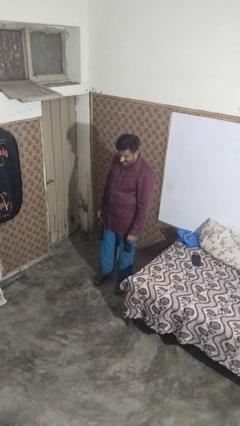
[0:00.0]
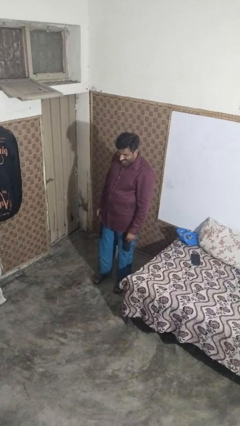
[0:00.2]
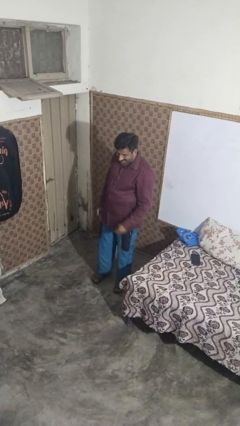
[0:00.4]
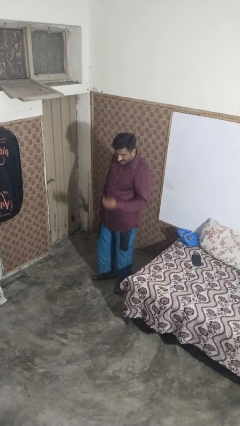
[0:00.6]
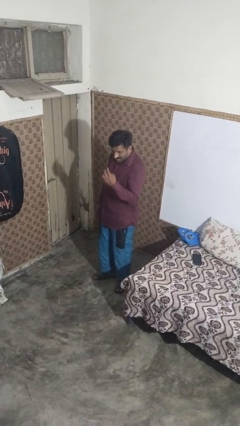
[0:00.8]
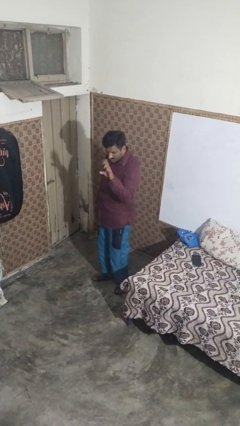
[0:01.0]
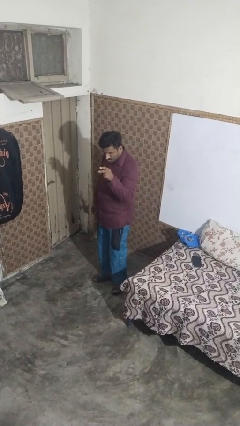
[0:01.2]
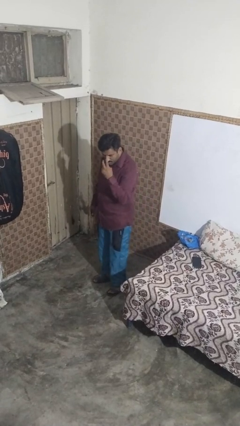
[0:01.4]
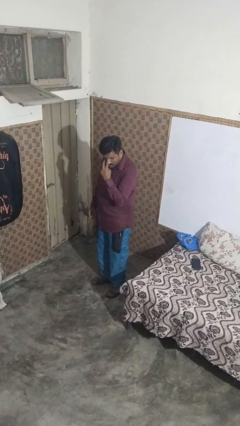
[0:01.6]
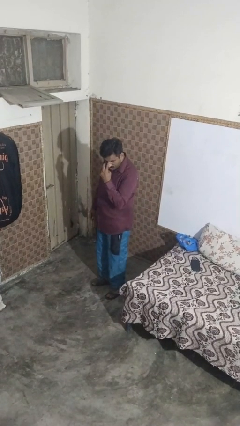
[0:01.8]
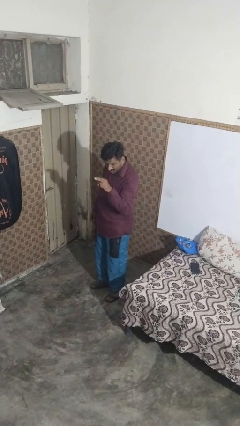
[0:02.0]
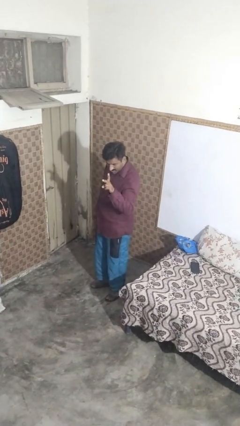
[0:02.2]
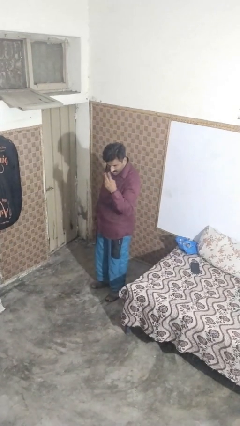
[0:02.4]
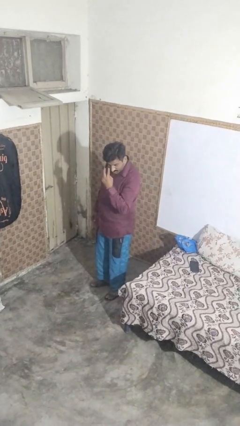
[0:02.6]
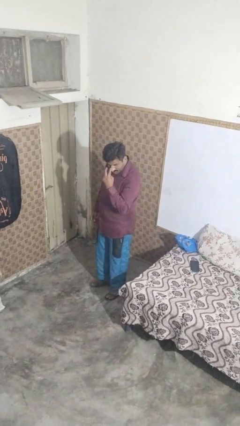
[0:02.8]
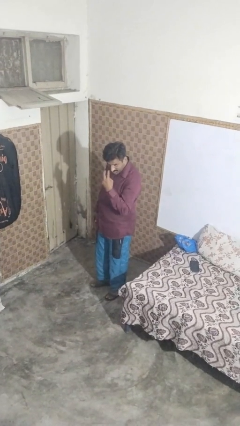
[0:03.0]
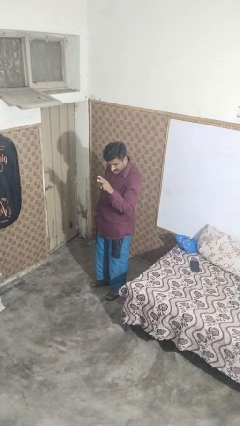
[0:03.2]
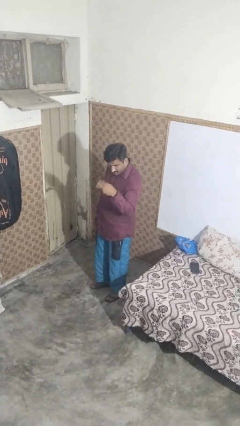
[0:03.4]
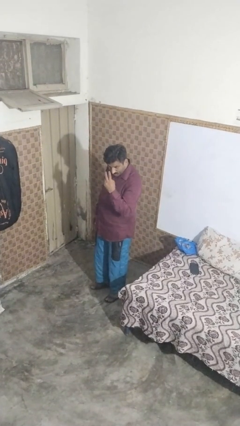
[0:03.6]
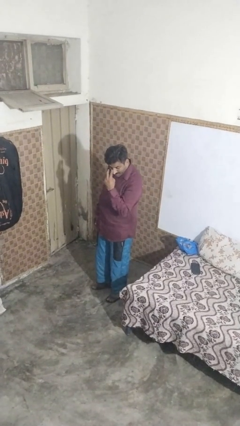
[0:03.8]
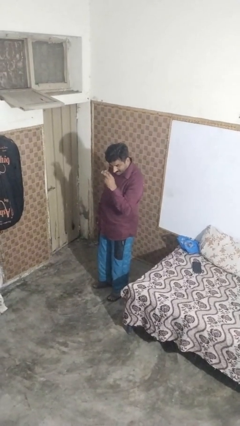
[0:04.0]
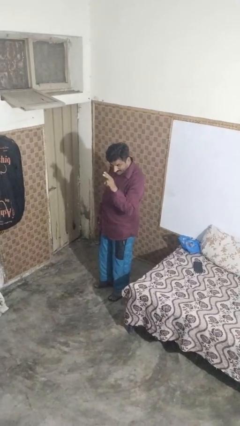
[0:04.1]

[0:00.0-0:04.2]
person gestures watch closely

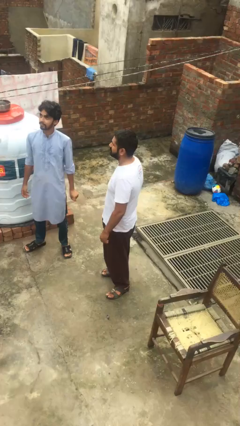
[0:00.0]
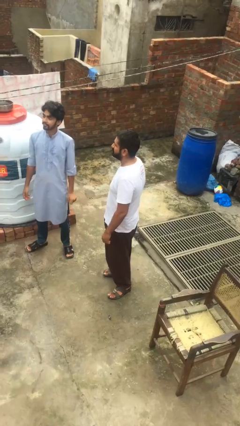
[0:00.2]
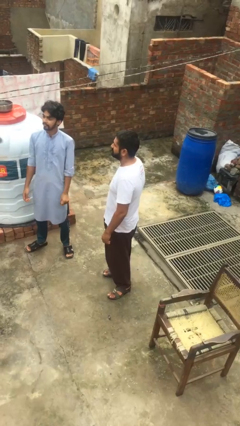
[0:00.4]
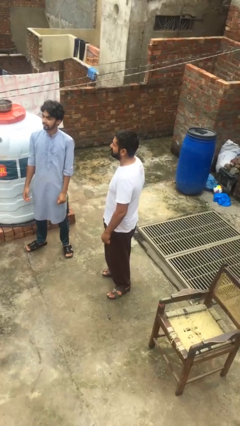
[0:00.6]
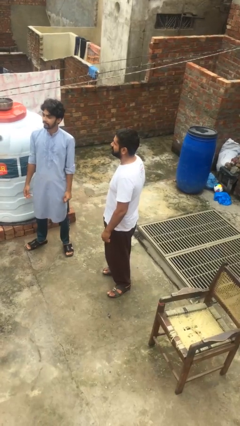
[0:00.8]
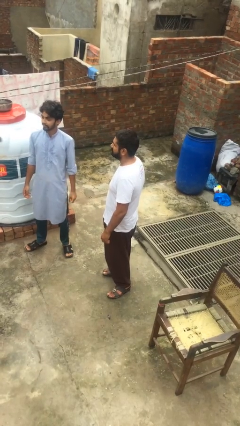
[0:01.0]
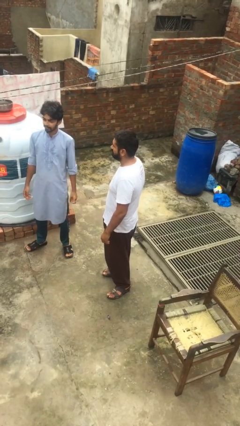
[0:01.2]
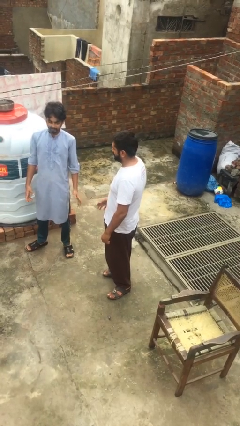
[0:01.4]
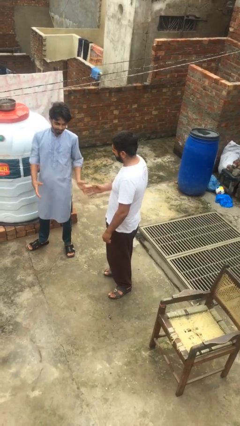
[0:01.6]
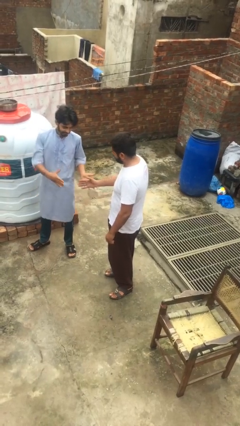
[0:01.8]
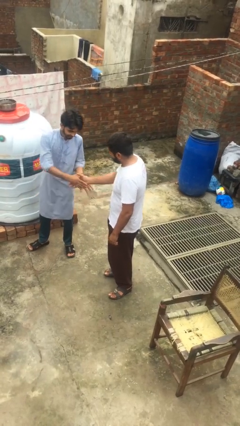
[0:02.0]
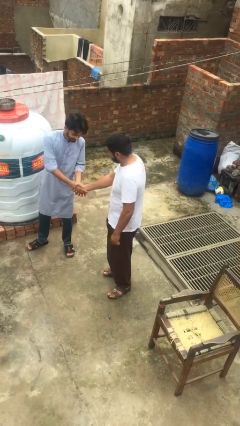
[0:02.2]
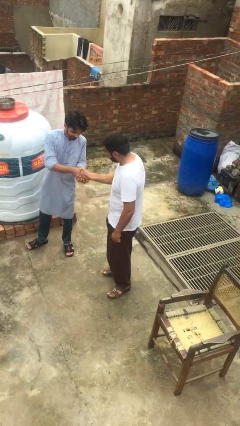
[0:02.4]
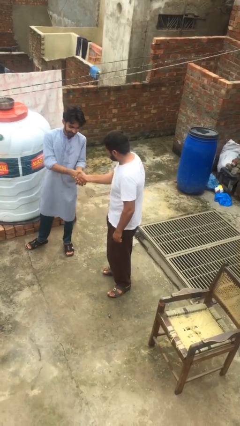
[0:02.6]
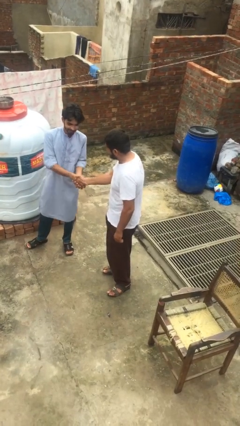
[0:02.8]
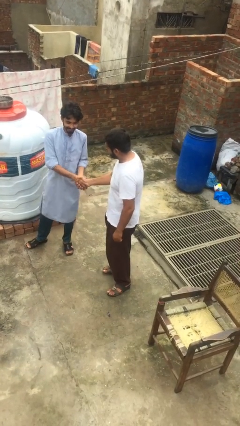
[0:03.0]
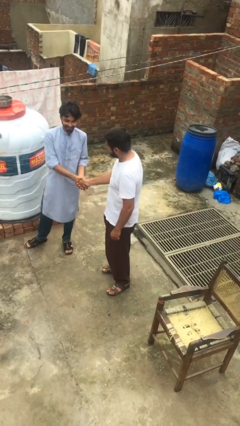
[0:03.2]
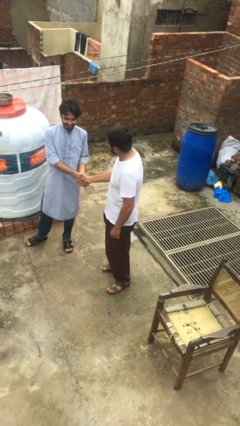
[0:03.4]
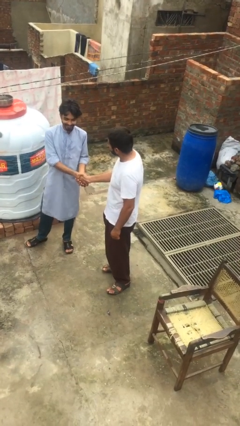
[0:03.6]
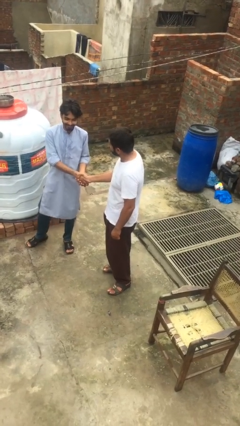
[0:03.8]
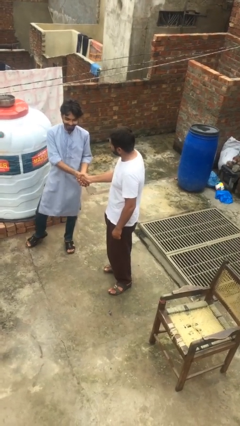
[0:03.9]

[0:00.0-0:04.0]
person shakes hand

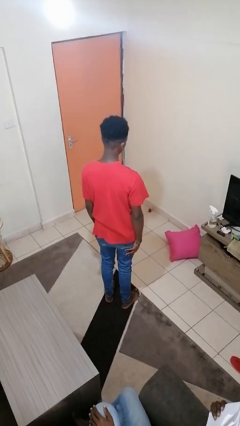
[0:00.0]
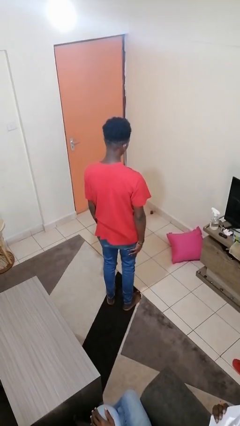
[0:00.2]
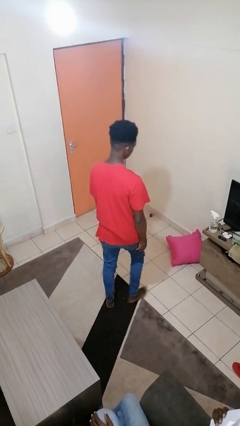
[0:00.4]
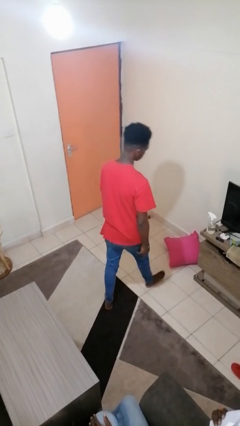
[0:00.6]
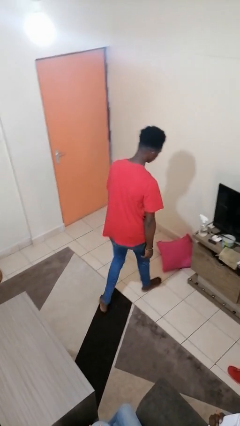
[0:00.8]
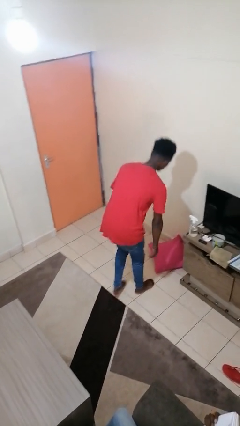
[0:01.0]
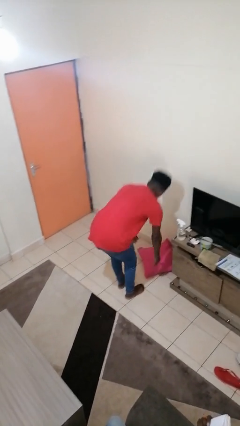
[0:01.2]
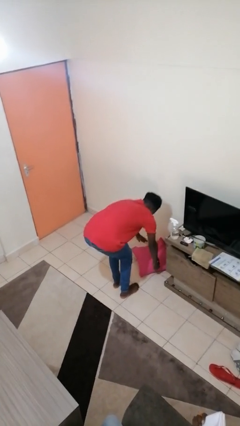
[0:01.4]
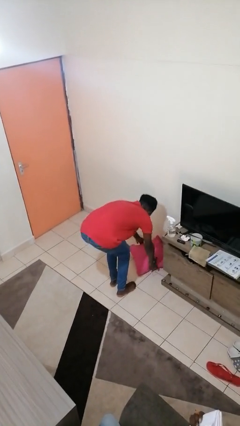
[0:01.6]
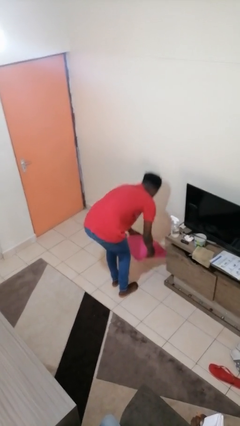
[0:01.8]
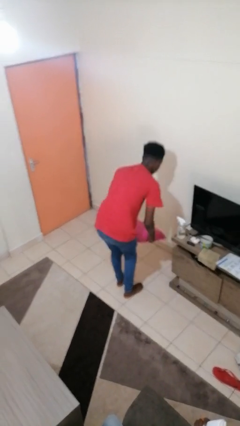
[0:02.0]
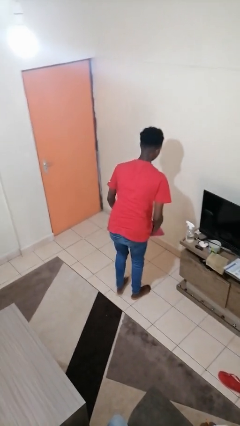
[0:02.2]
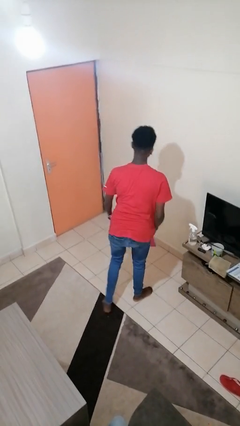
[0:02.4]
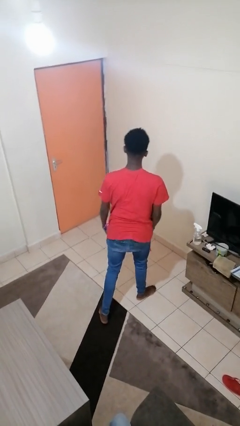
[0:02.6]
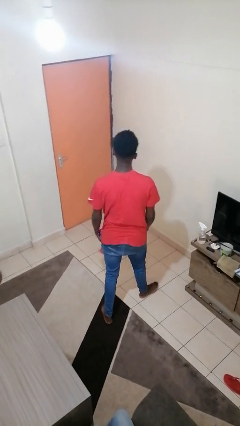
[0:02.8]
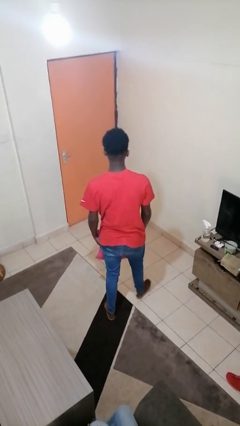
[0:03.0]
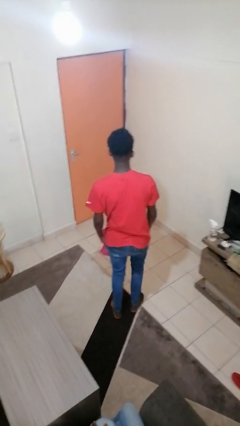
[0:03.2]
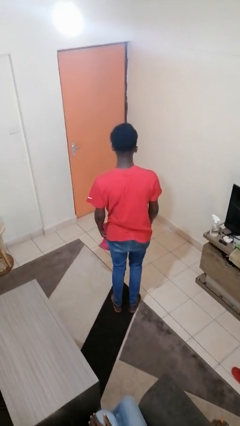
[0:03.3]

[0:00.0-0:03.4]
person picks up object from floor

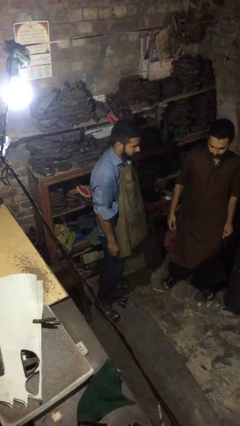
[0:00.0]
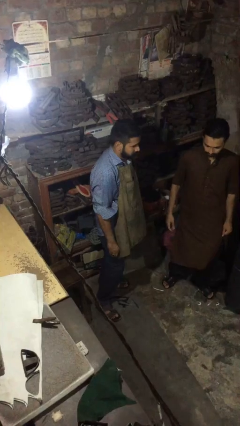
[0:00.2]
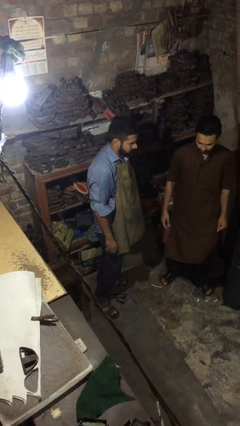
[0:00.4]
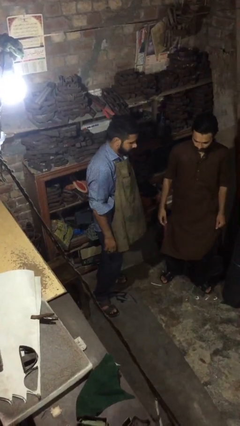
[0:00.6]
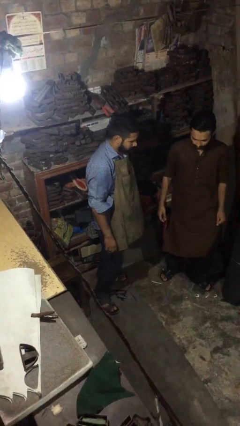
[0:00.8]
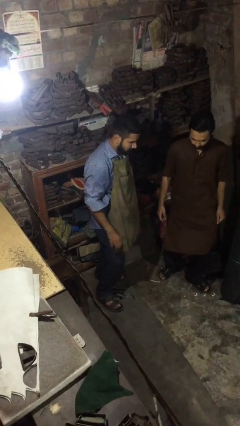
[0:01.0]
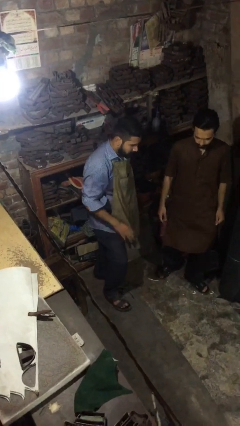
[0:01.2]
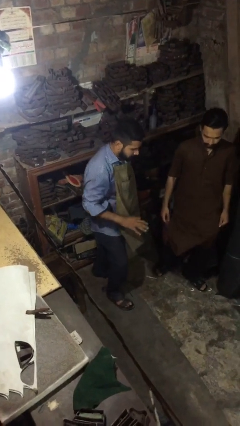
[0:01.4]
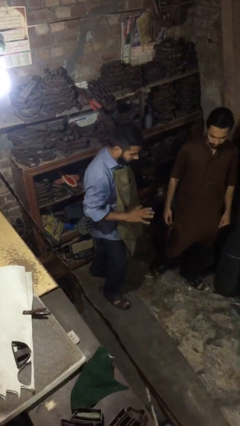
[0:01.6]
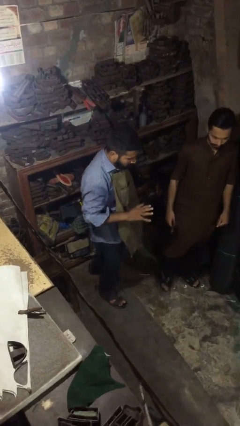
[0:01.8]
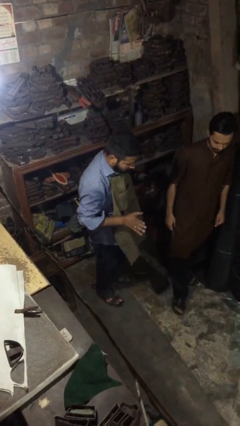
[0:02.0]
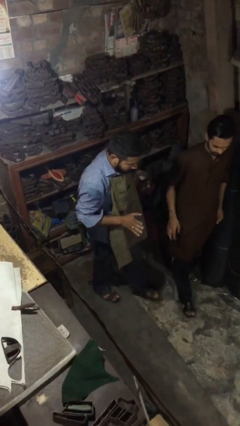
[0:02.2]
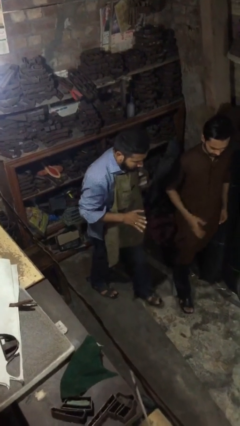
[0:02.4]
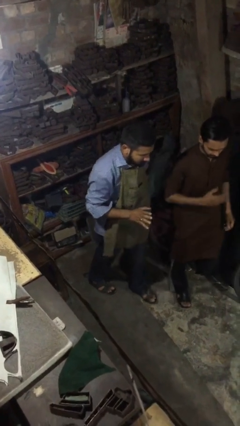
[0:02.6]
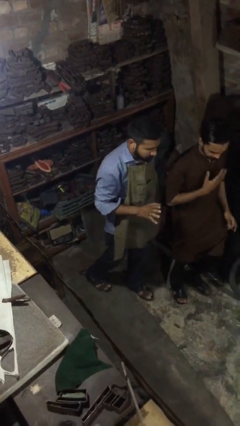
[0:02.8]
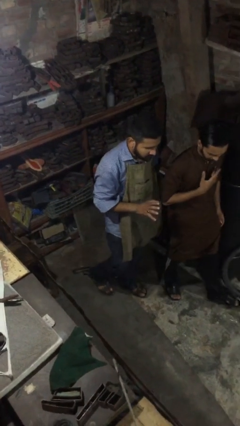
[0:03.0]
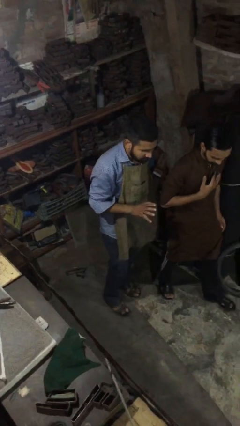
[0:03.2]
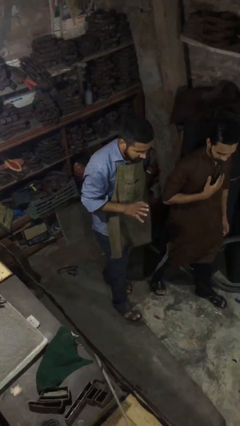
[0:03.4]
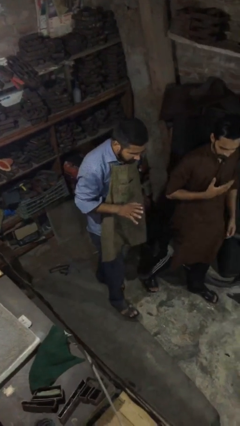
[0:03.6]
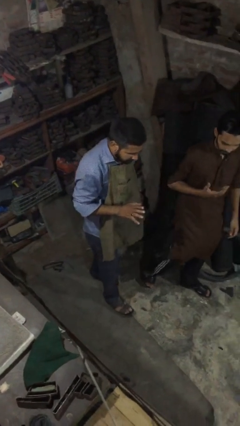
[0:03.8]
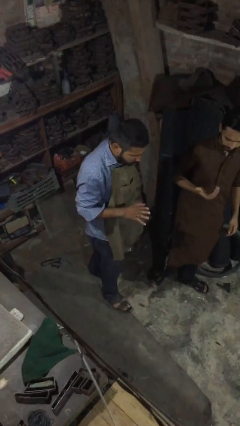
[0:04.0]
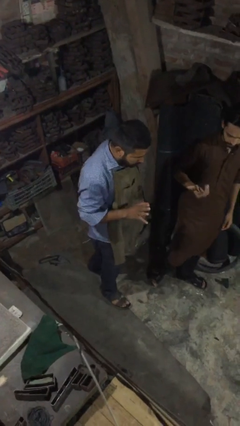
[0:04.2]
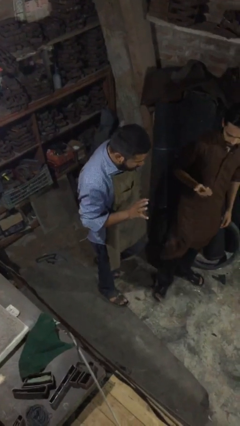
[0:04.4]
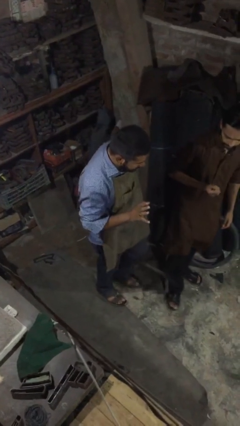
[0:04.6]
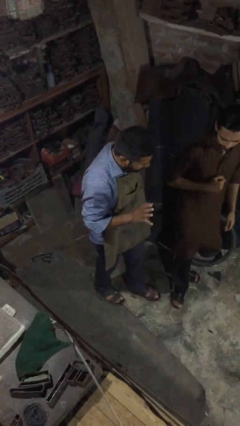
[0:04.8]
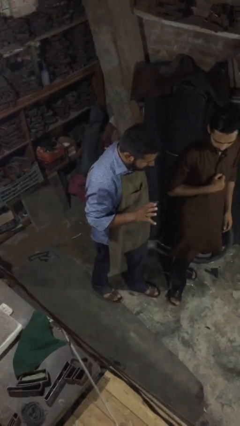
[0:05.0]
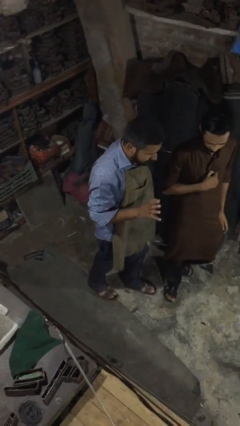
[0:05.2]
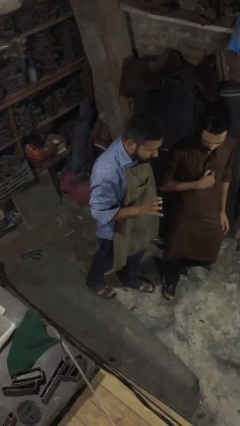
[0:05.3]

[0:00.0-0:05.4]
person talks to person

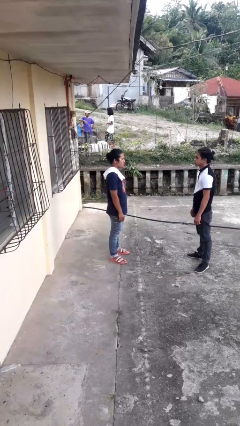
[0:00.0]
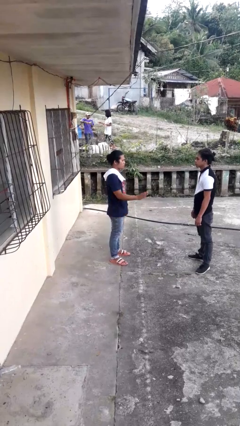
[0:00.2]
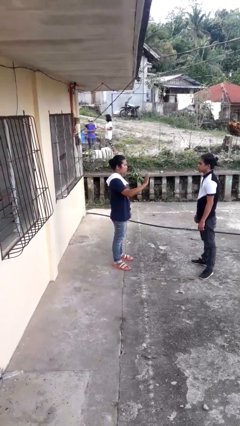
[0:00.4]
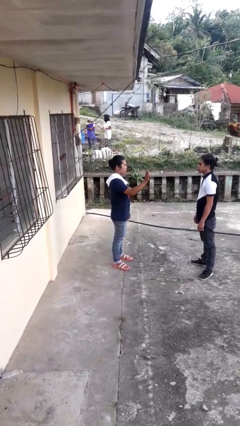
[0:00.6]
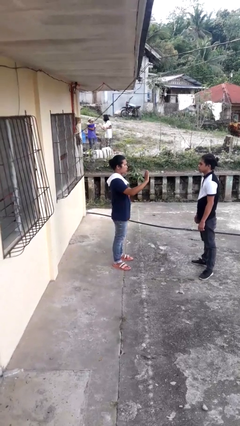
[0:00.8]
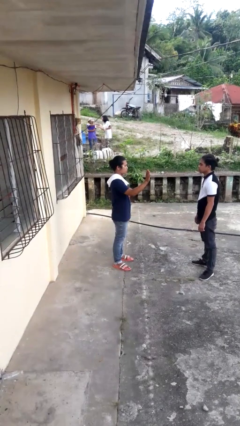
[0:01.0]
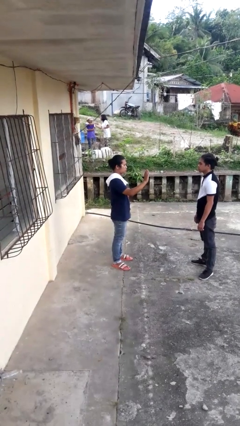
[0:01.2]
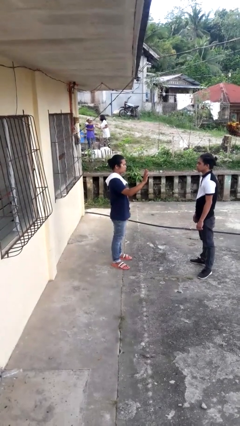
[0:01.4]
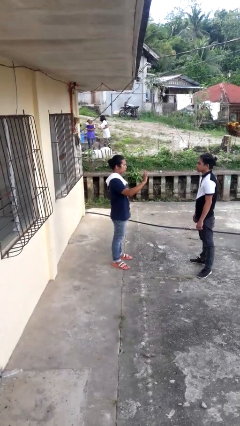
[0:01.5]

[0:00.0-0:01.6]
person waves at person
